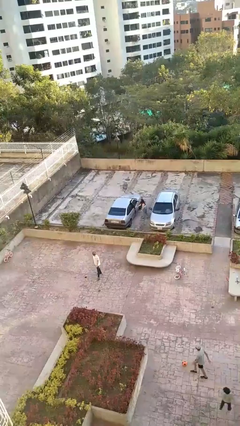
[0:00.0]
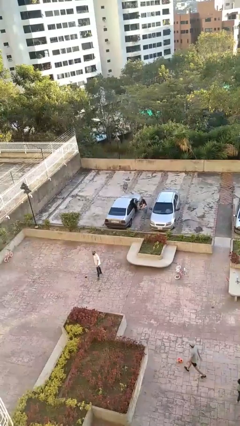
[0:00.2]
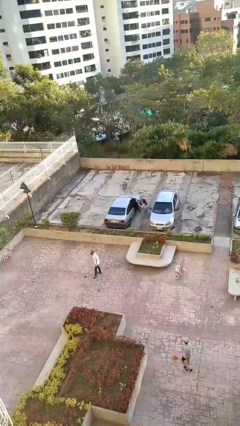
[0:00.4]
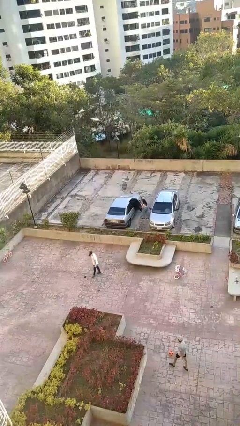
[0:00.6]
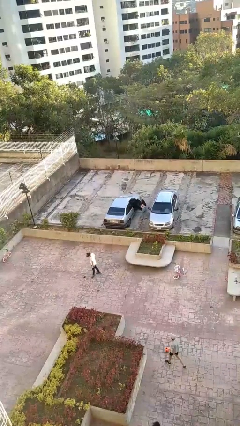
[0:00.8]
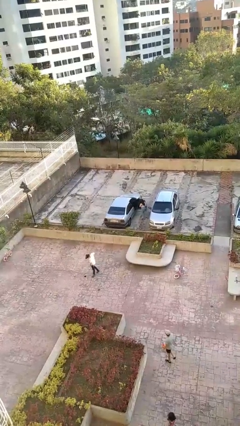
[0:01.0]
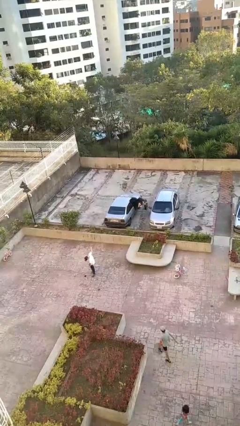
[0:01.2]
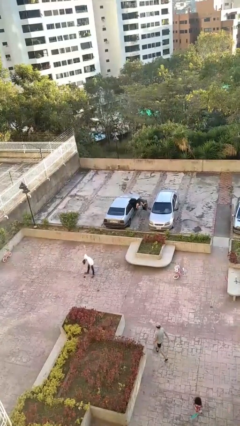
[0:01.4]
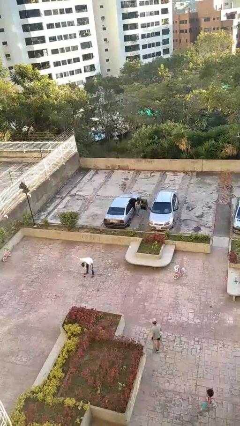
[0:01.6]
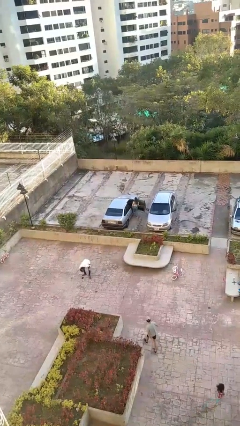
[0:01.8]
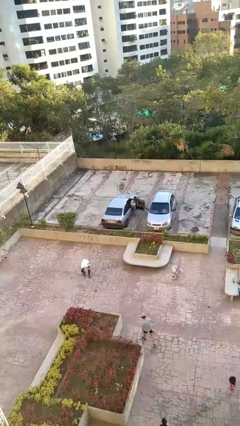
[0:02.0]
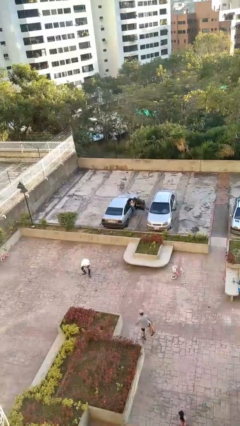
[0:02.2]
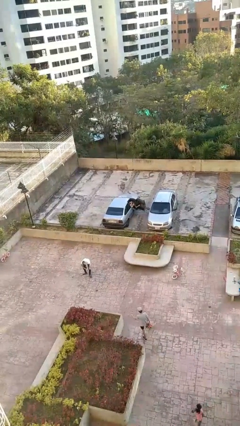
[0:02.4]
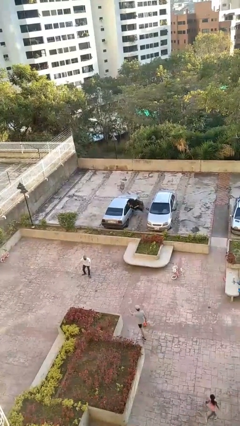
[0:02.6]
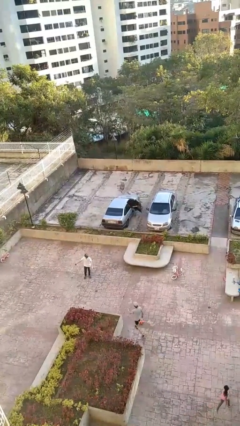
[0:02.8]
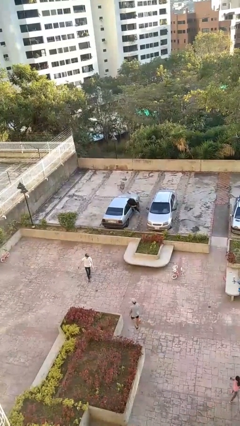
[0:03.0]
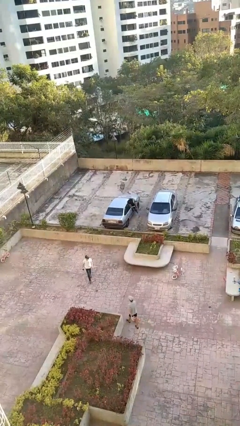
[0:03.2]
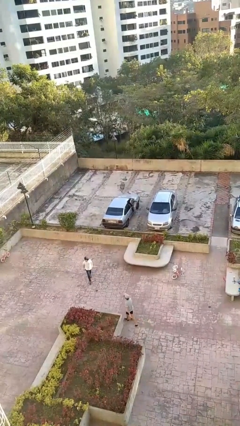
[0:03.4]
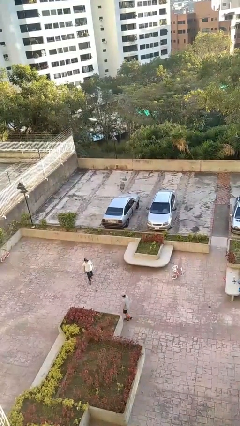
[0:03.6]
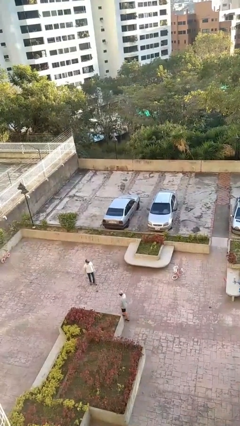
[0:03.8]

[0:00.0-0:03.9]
car picks up person

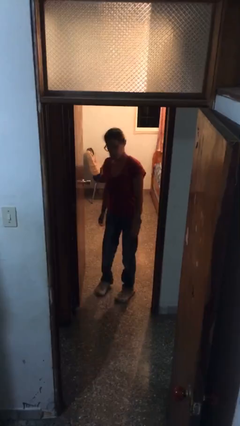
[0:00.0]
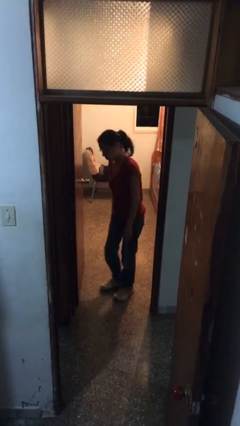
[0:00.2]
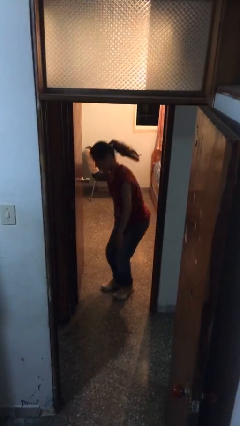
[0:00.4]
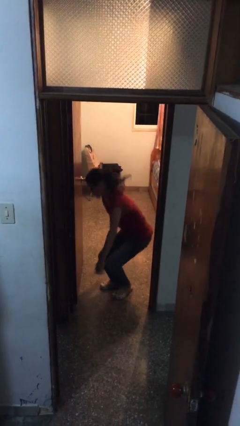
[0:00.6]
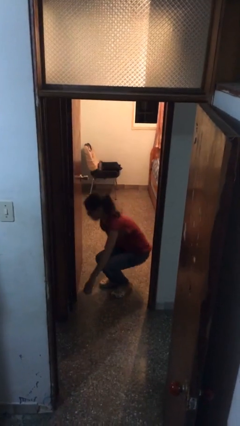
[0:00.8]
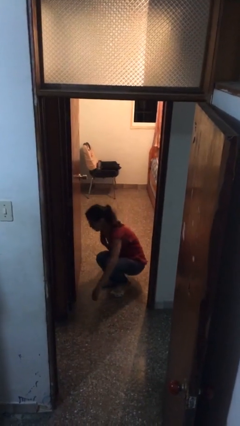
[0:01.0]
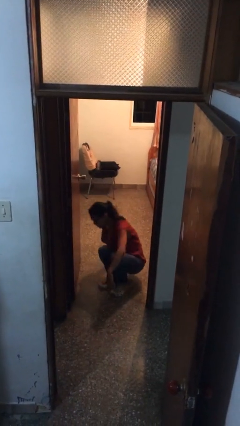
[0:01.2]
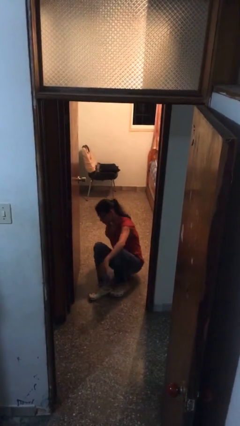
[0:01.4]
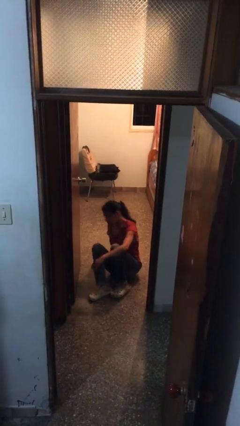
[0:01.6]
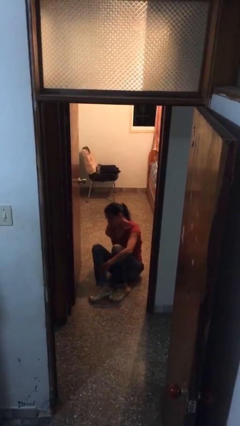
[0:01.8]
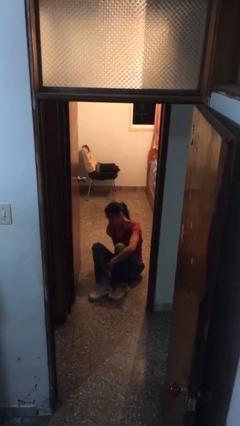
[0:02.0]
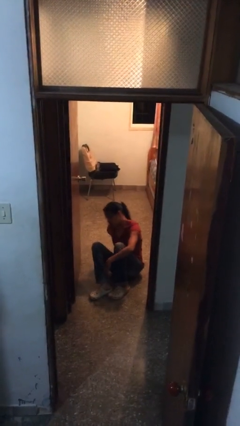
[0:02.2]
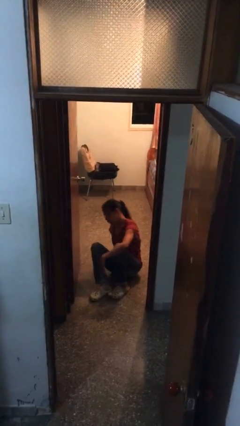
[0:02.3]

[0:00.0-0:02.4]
person sits down

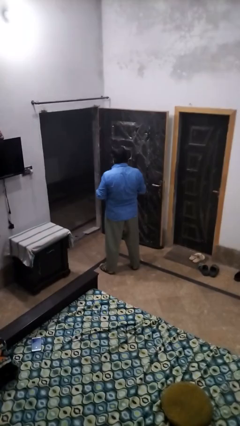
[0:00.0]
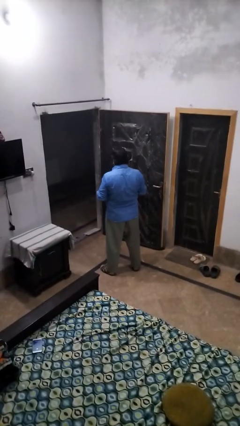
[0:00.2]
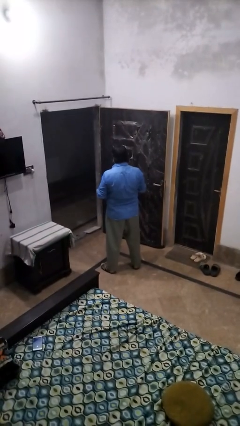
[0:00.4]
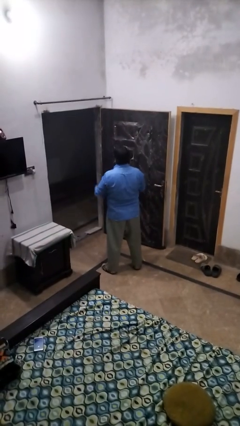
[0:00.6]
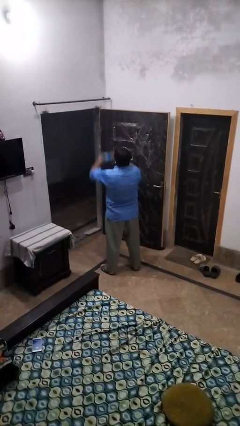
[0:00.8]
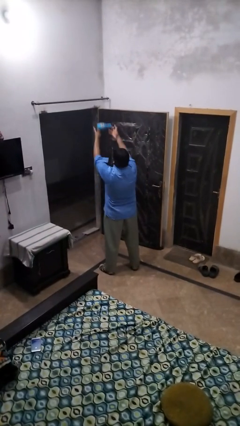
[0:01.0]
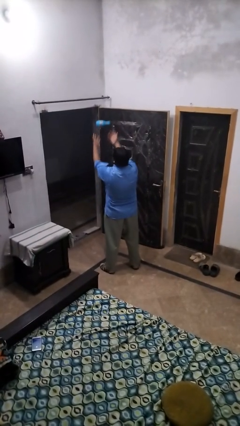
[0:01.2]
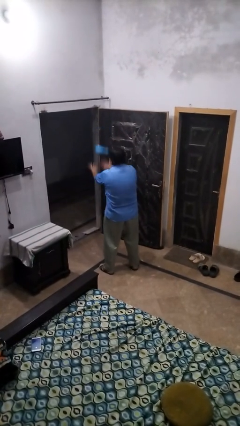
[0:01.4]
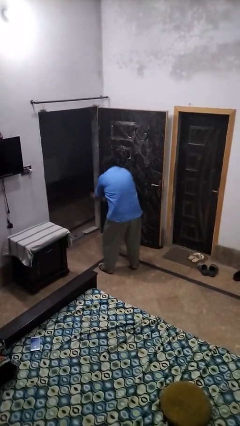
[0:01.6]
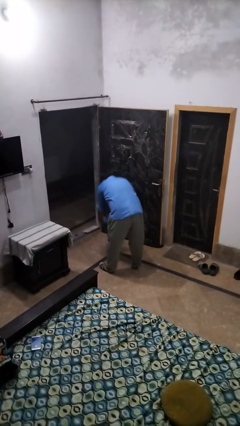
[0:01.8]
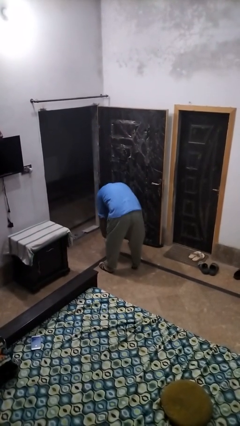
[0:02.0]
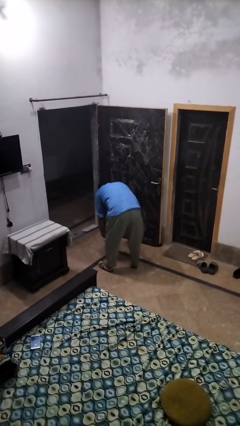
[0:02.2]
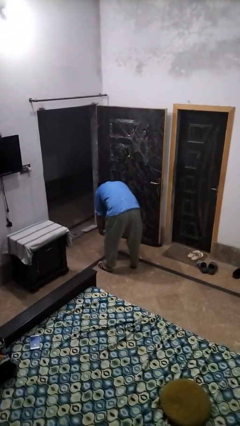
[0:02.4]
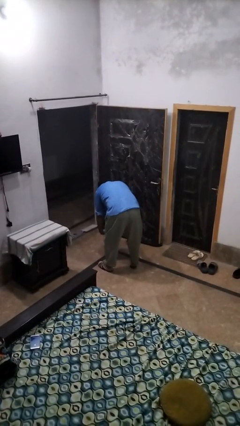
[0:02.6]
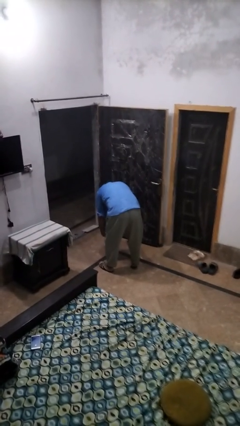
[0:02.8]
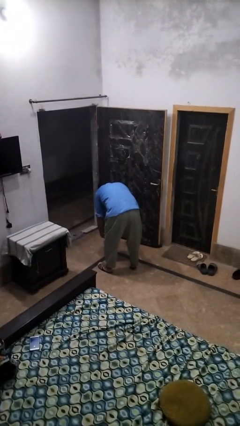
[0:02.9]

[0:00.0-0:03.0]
person drops object

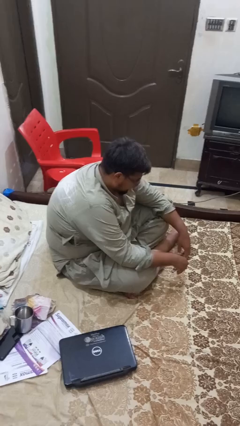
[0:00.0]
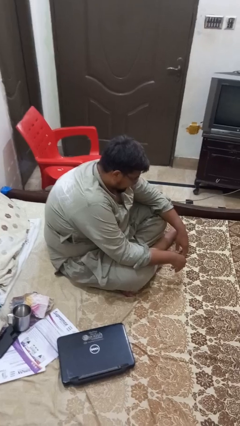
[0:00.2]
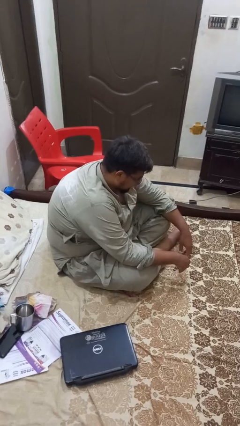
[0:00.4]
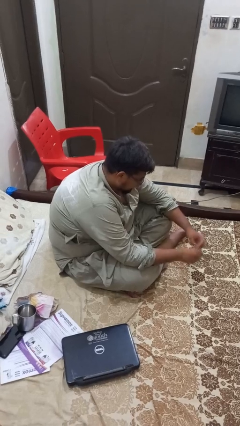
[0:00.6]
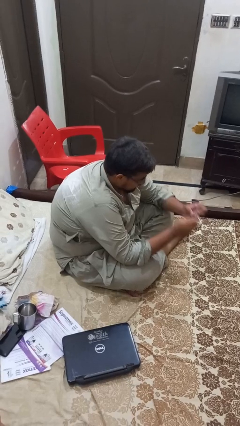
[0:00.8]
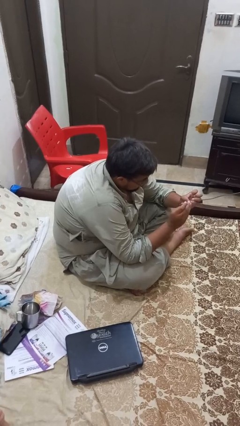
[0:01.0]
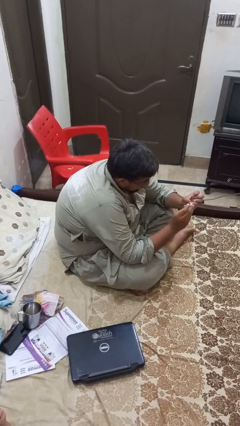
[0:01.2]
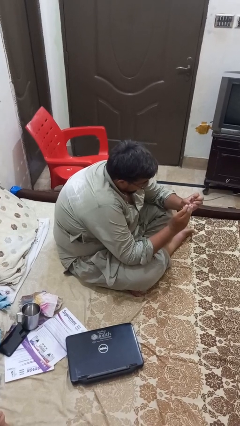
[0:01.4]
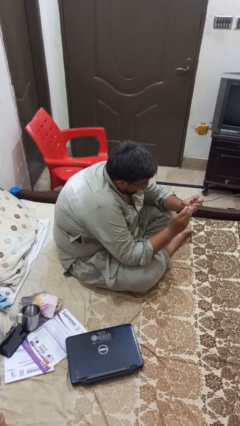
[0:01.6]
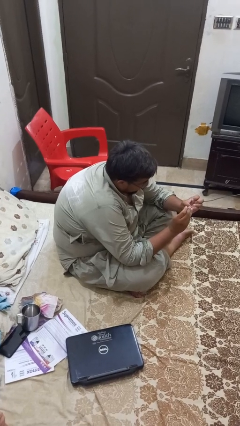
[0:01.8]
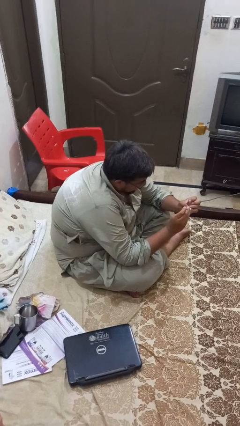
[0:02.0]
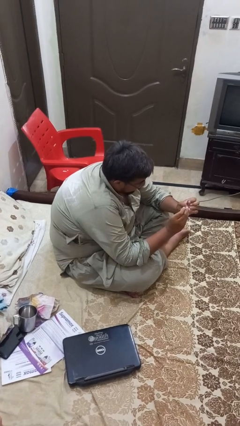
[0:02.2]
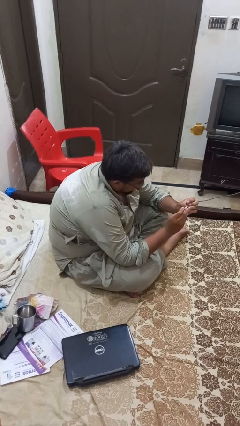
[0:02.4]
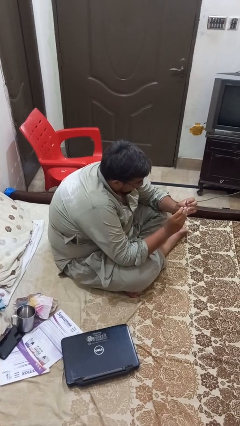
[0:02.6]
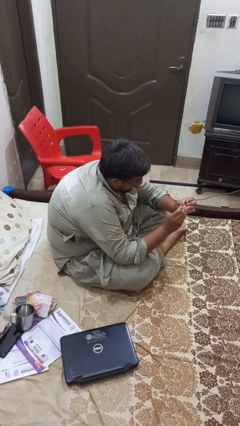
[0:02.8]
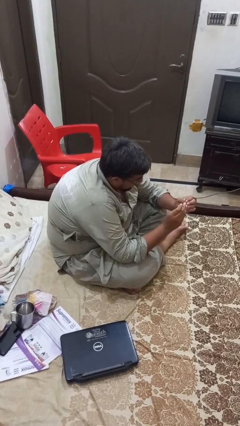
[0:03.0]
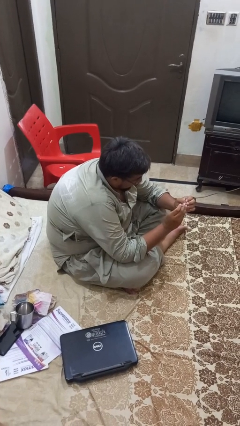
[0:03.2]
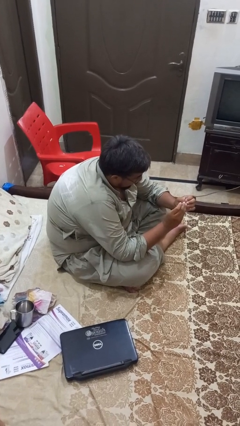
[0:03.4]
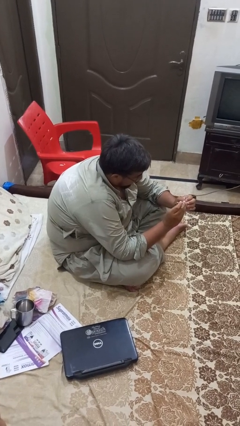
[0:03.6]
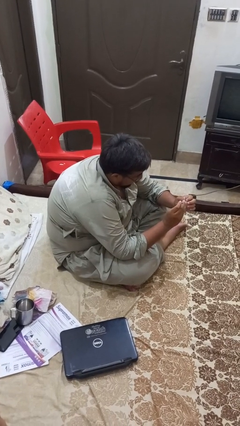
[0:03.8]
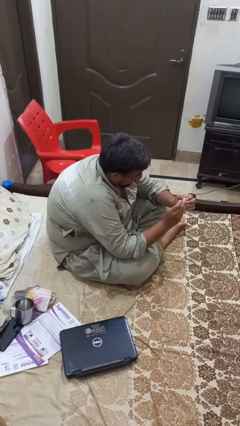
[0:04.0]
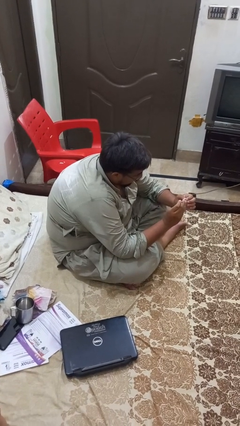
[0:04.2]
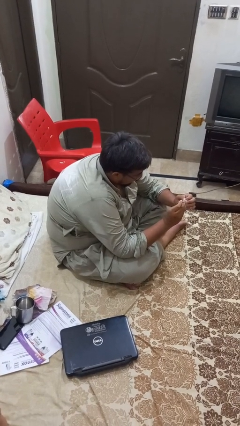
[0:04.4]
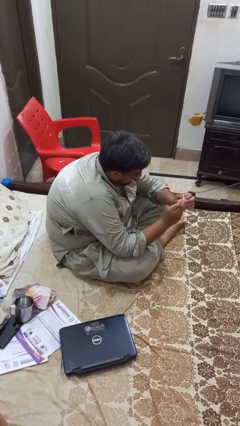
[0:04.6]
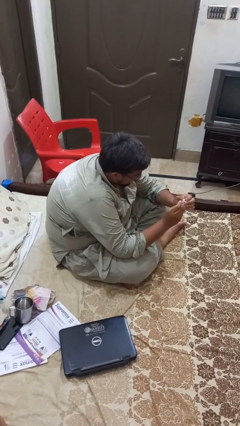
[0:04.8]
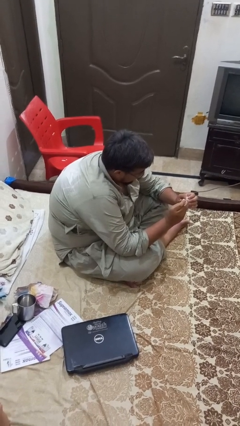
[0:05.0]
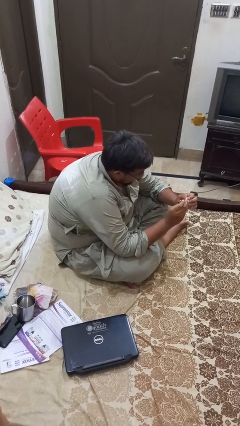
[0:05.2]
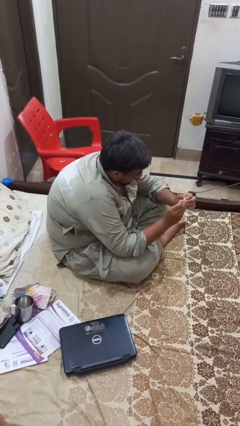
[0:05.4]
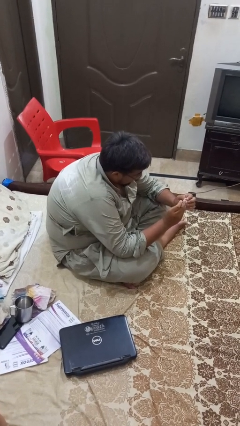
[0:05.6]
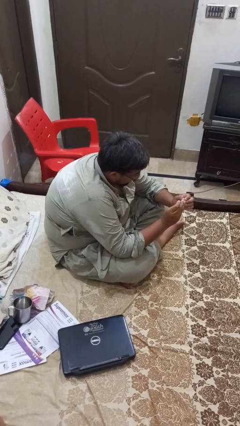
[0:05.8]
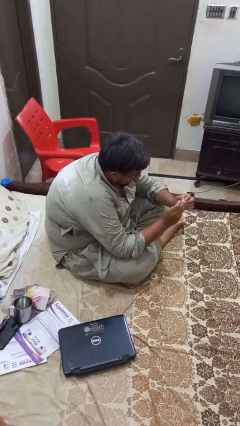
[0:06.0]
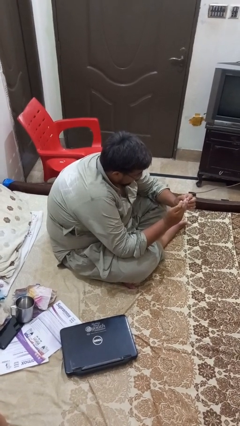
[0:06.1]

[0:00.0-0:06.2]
person clips fingernails

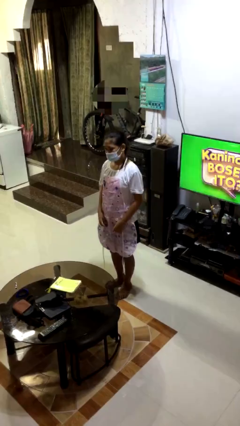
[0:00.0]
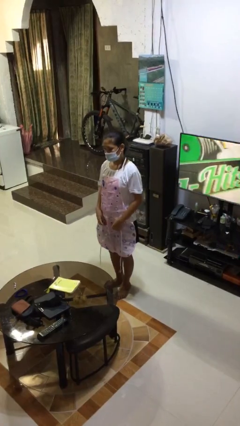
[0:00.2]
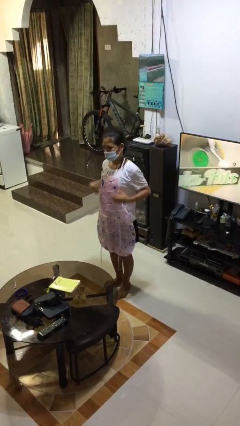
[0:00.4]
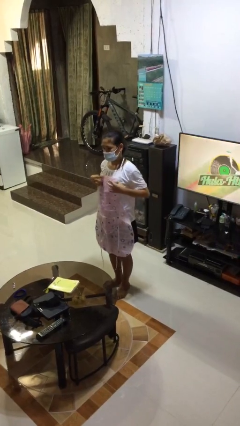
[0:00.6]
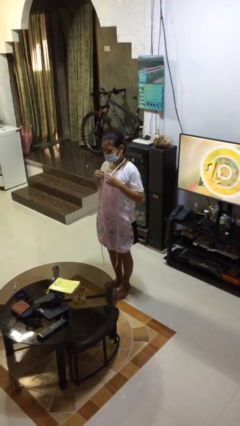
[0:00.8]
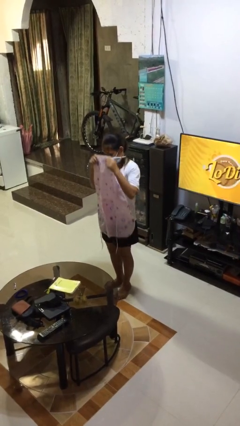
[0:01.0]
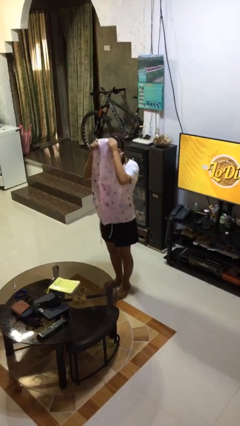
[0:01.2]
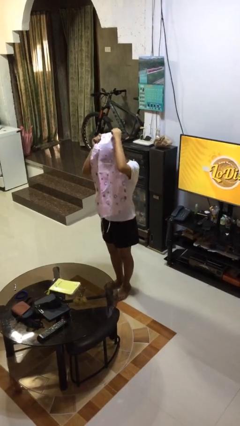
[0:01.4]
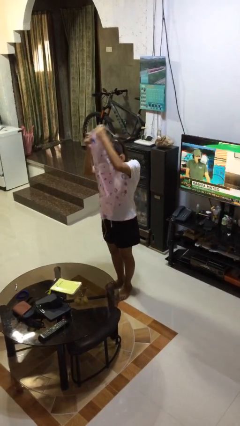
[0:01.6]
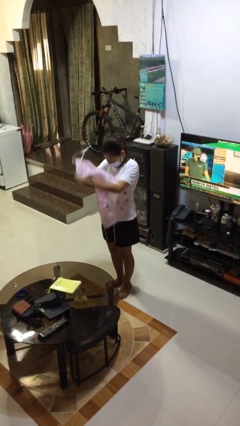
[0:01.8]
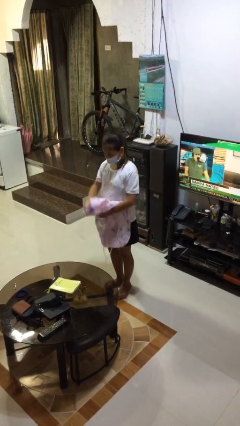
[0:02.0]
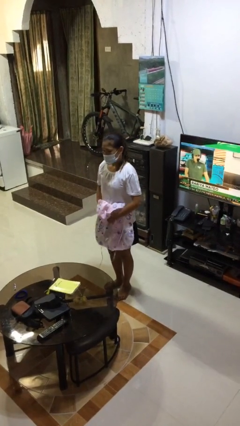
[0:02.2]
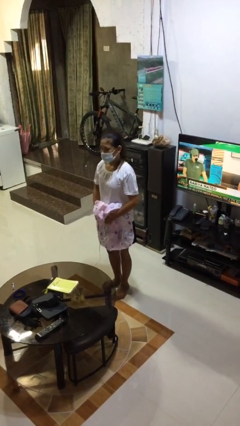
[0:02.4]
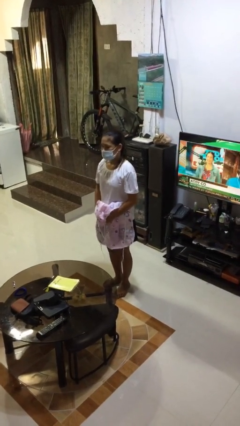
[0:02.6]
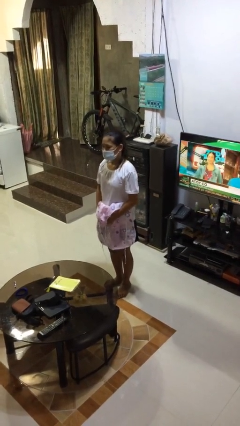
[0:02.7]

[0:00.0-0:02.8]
person takes off apron
